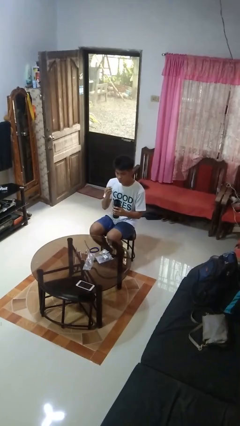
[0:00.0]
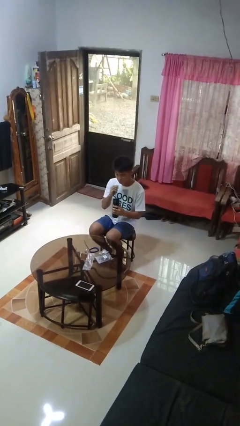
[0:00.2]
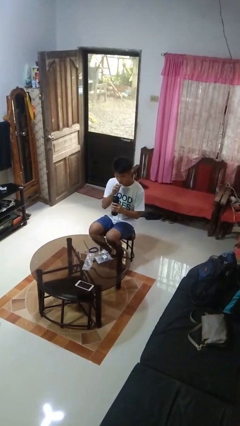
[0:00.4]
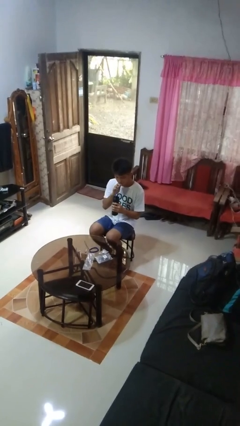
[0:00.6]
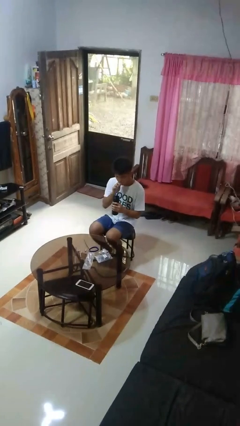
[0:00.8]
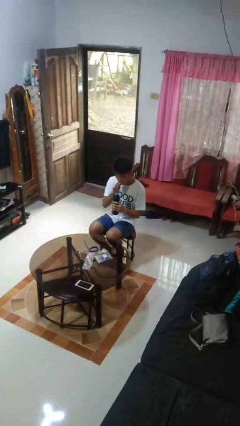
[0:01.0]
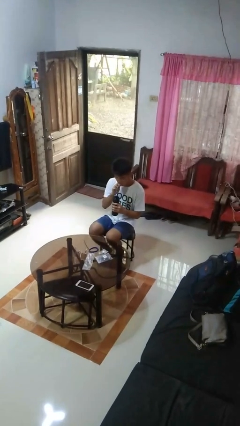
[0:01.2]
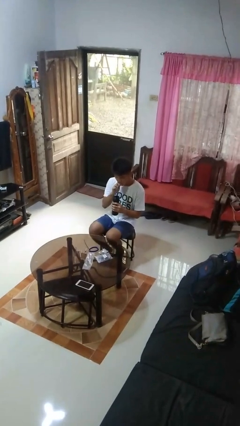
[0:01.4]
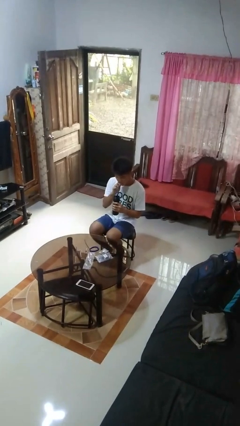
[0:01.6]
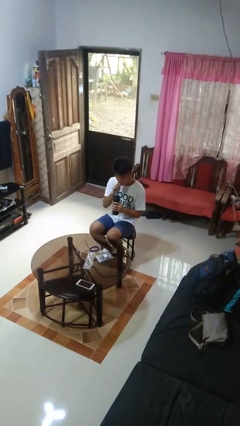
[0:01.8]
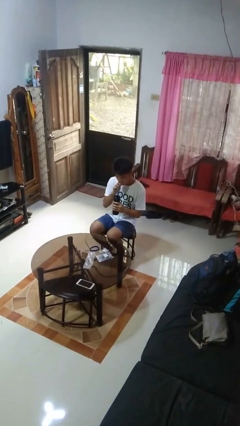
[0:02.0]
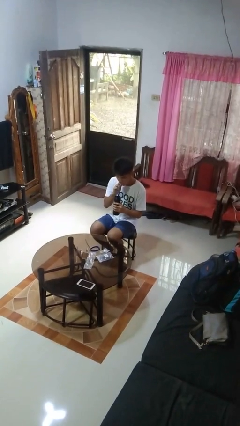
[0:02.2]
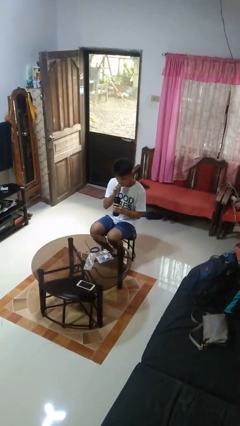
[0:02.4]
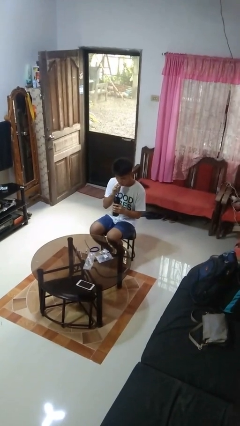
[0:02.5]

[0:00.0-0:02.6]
person drinks from straw

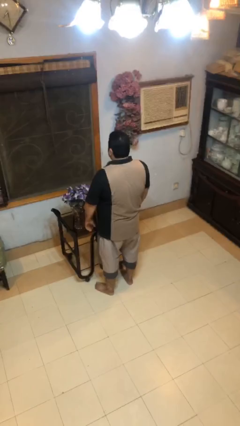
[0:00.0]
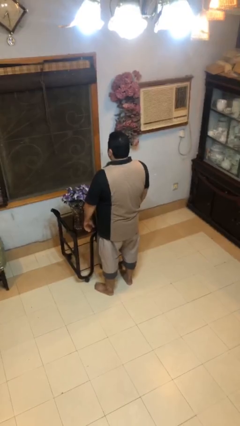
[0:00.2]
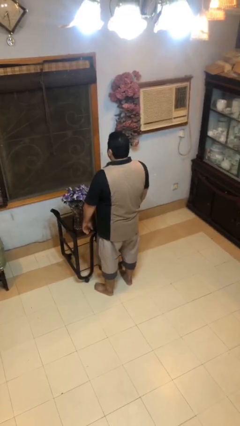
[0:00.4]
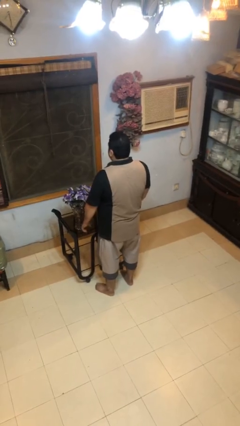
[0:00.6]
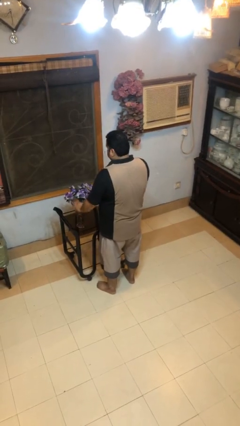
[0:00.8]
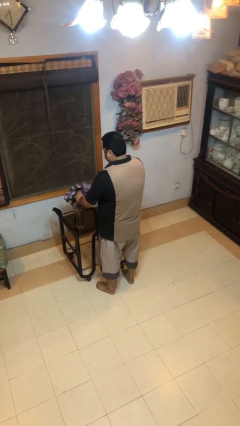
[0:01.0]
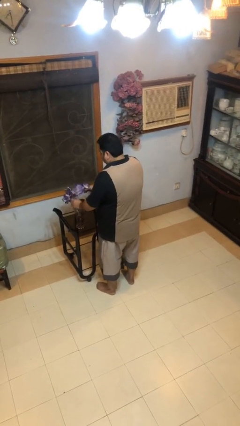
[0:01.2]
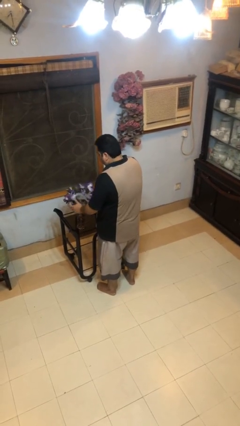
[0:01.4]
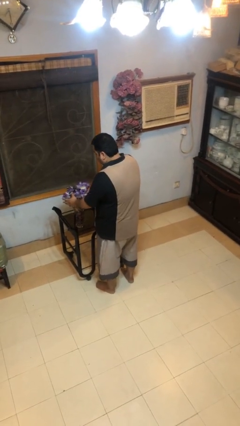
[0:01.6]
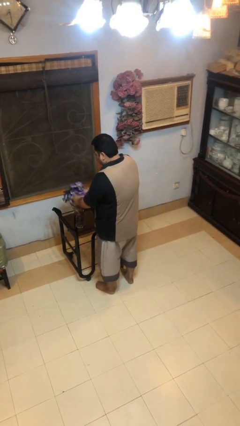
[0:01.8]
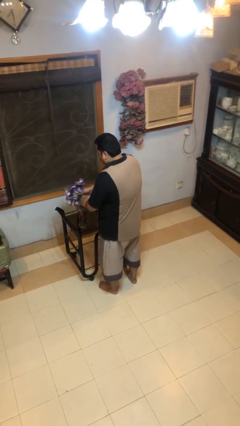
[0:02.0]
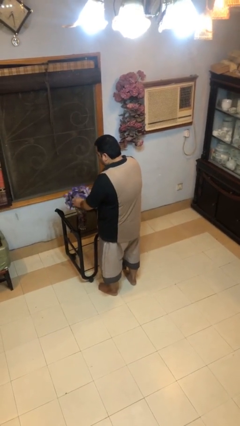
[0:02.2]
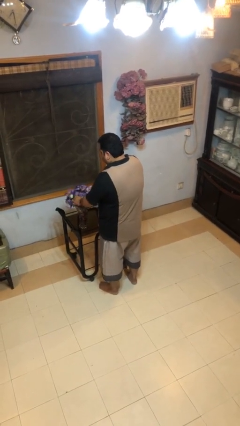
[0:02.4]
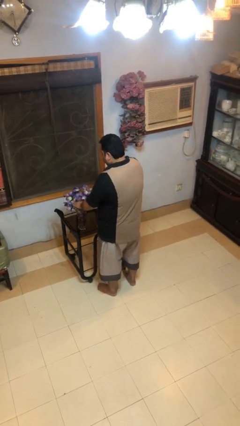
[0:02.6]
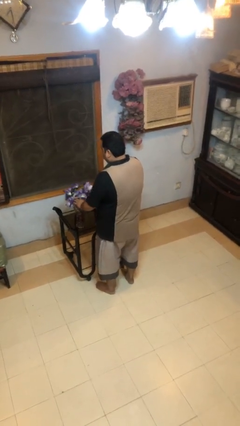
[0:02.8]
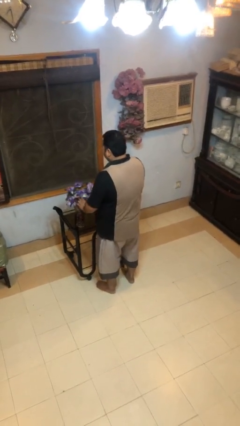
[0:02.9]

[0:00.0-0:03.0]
person arranges flowers in vase

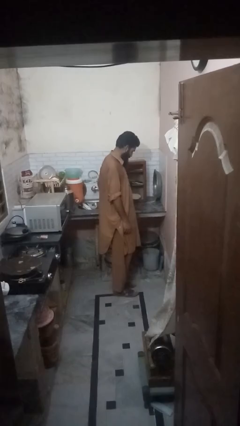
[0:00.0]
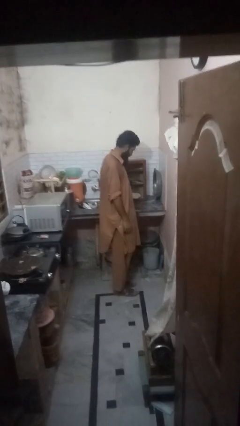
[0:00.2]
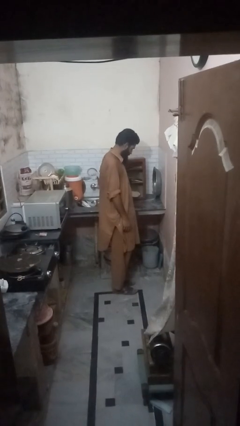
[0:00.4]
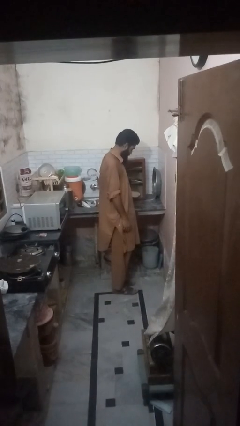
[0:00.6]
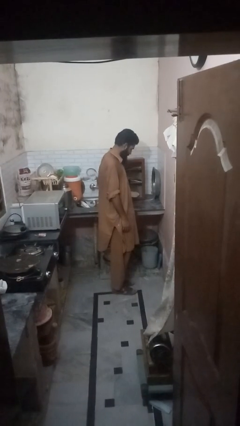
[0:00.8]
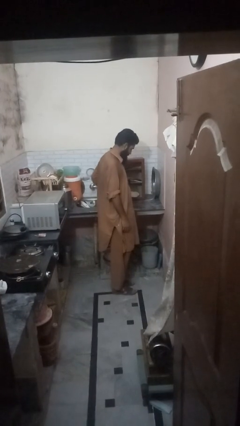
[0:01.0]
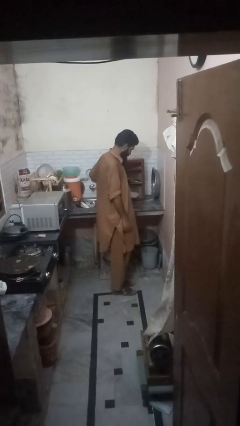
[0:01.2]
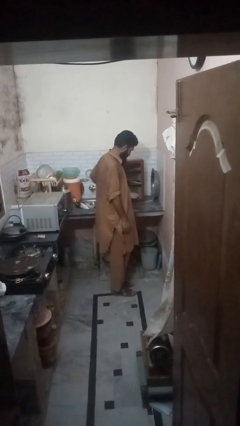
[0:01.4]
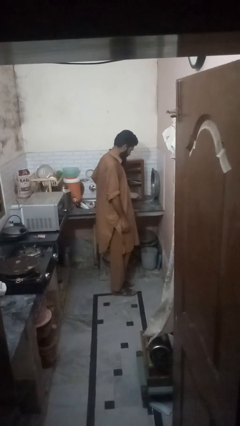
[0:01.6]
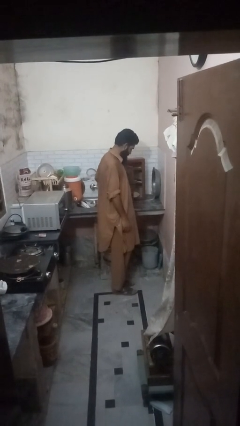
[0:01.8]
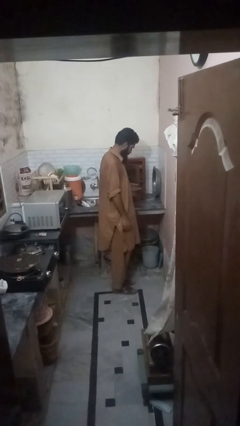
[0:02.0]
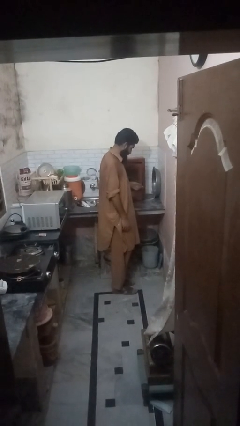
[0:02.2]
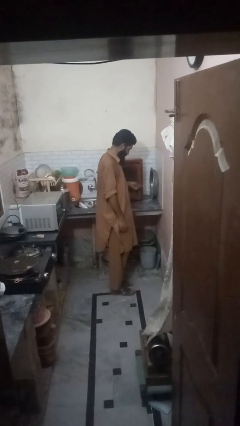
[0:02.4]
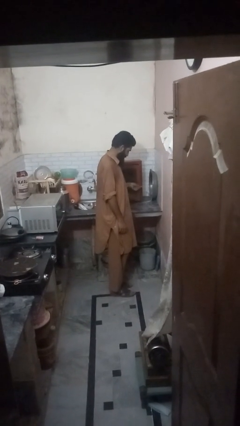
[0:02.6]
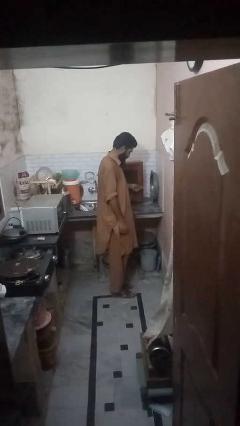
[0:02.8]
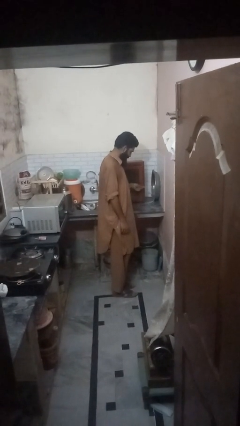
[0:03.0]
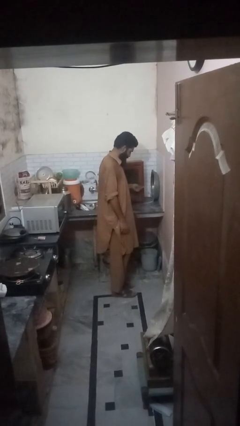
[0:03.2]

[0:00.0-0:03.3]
person closes cabinet

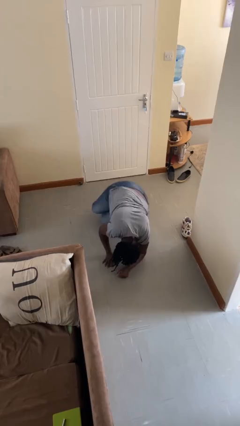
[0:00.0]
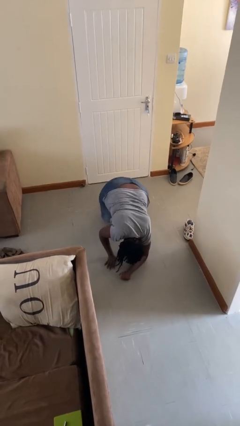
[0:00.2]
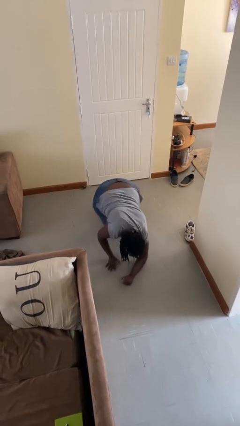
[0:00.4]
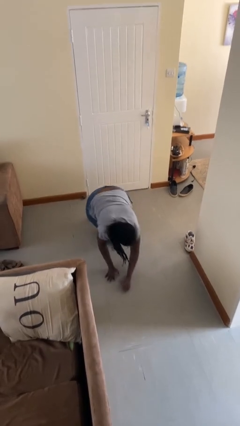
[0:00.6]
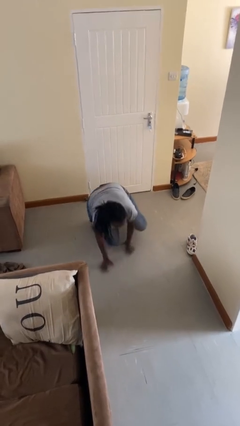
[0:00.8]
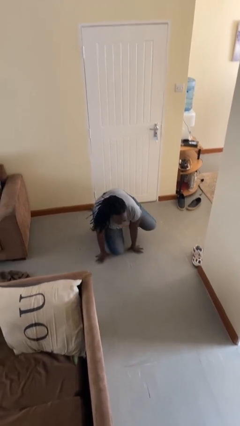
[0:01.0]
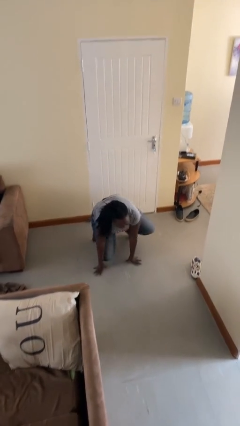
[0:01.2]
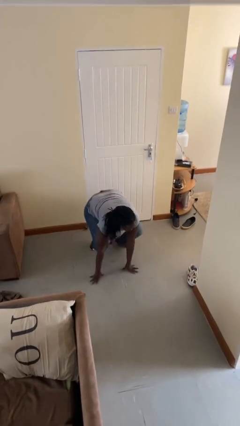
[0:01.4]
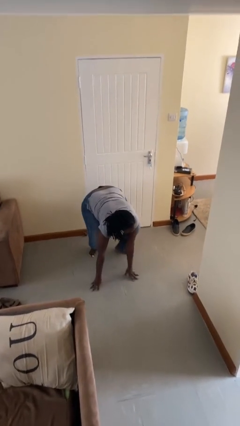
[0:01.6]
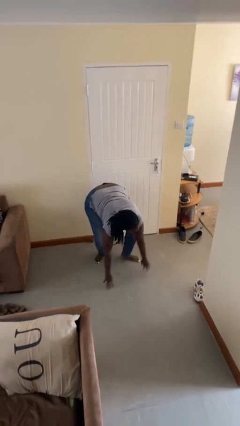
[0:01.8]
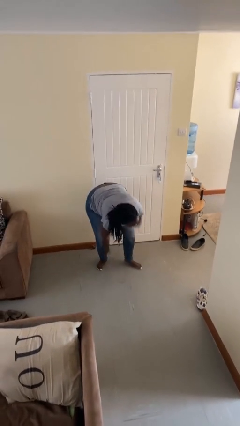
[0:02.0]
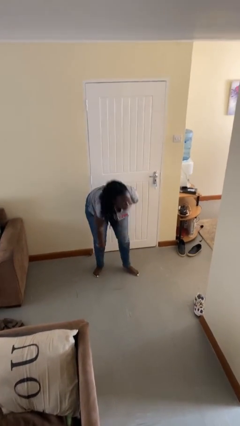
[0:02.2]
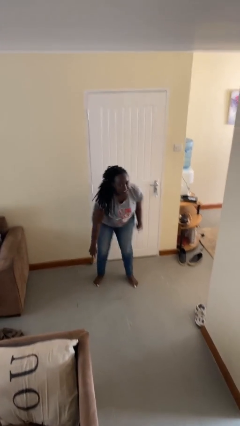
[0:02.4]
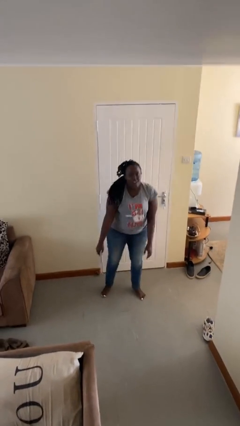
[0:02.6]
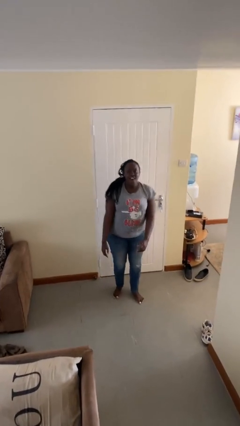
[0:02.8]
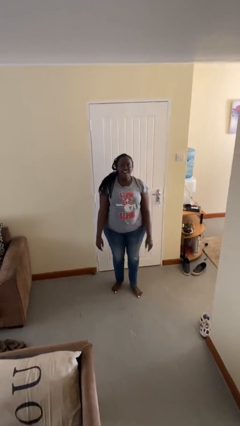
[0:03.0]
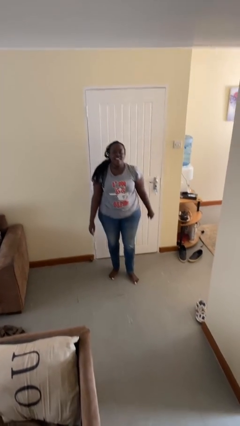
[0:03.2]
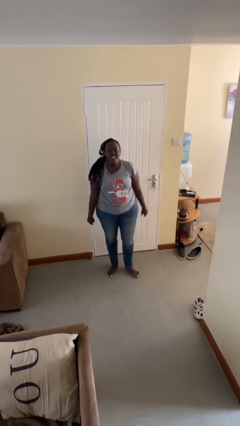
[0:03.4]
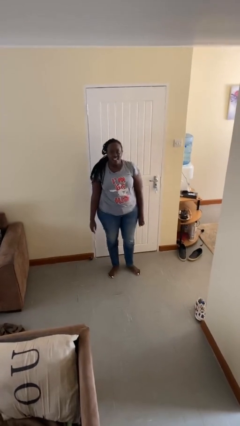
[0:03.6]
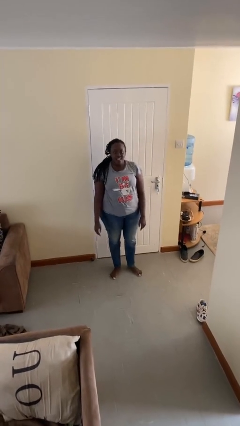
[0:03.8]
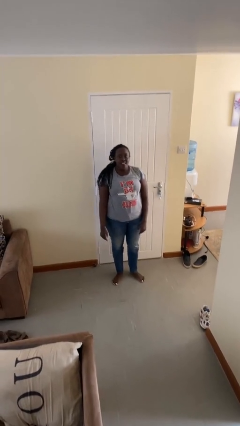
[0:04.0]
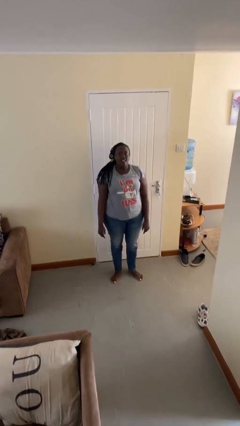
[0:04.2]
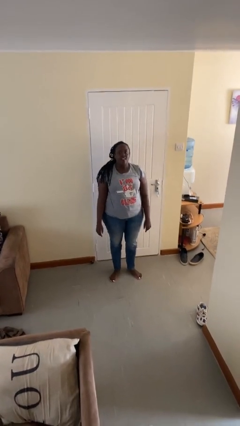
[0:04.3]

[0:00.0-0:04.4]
person stands up from floor

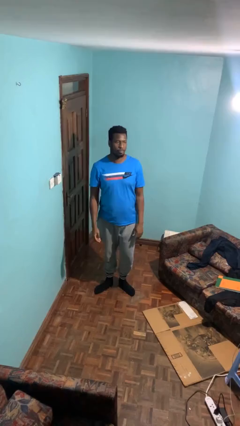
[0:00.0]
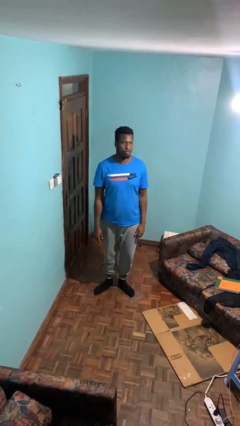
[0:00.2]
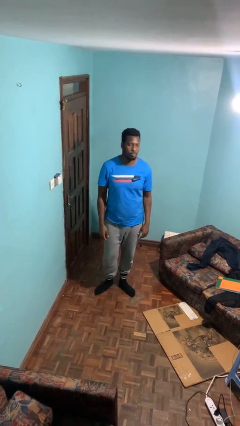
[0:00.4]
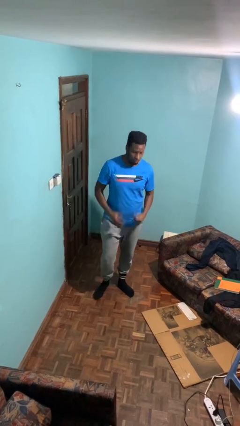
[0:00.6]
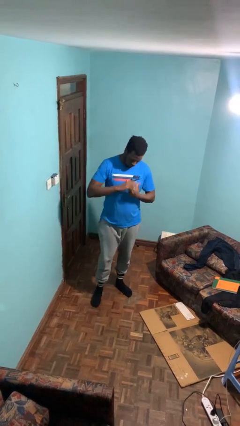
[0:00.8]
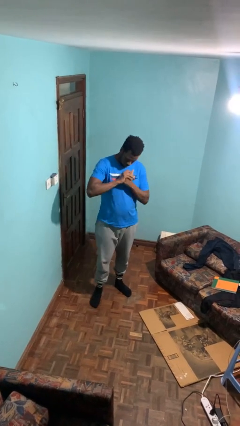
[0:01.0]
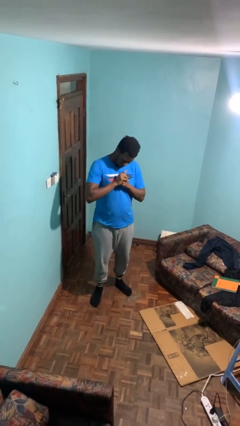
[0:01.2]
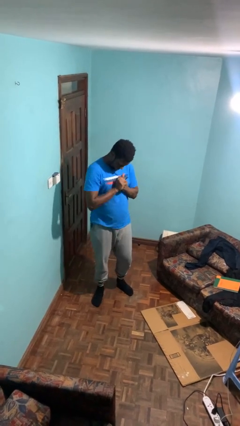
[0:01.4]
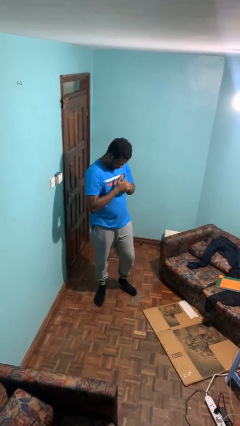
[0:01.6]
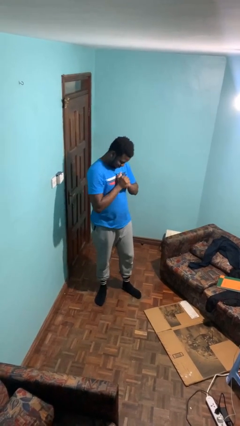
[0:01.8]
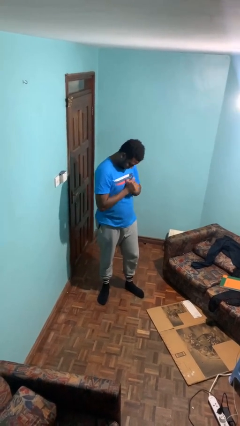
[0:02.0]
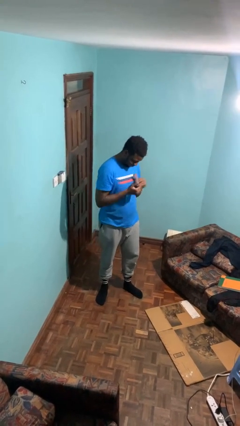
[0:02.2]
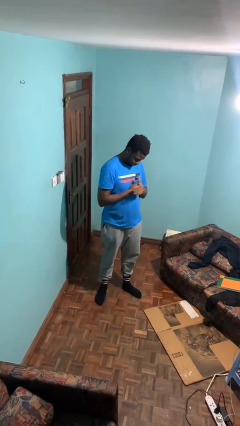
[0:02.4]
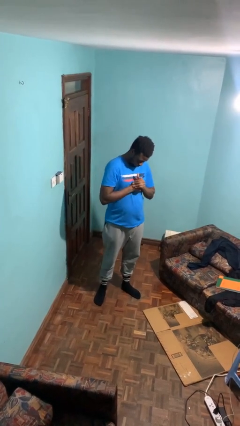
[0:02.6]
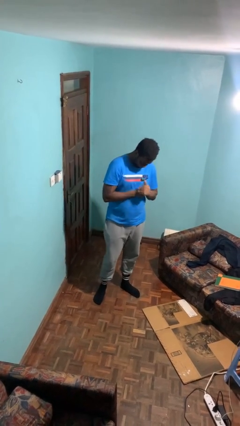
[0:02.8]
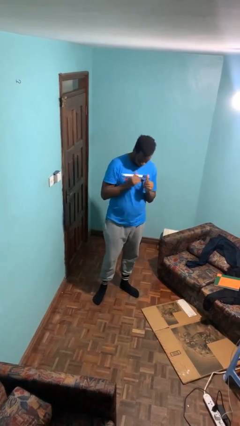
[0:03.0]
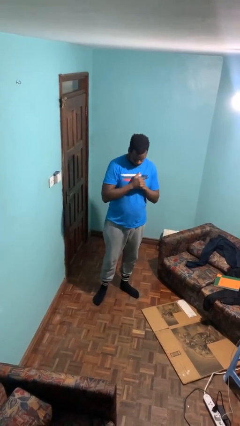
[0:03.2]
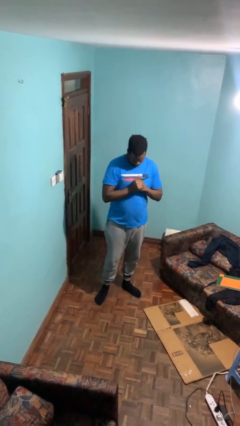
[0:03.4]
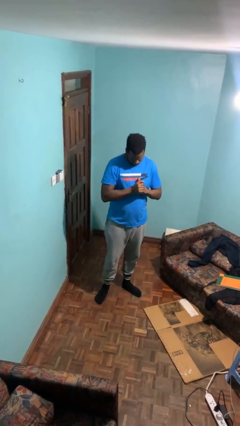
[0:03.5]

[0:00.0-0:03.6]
person cracks knuckles

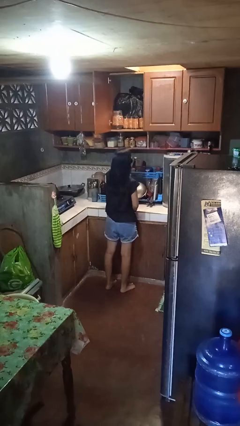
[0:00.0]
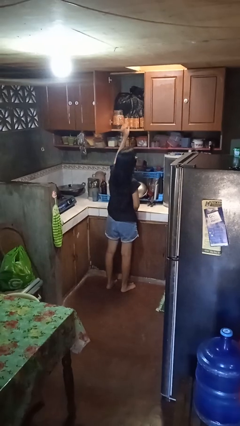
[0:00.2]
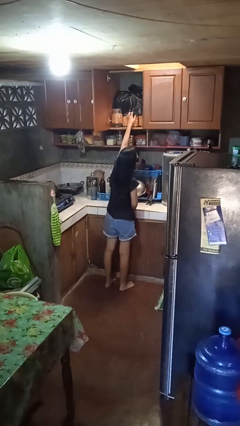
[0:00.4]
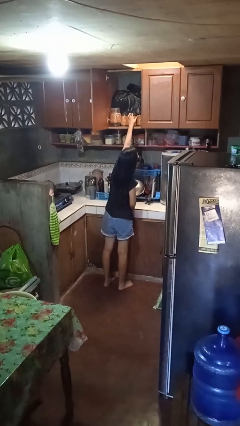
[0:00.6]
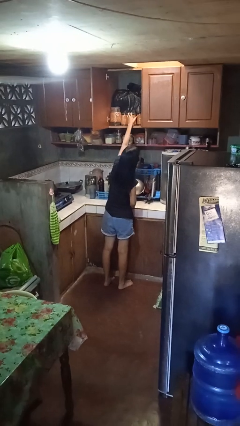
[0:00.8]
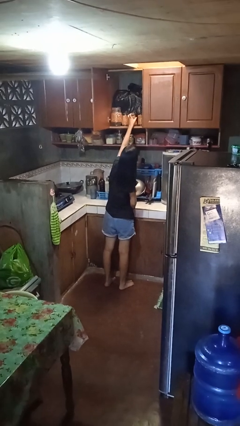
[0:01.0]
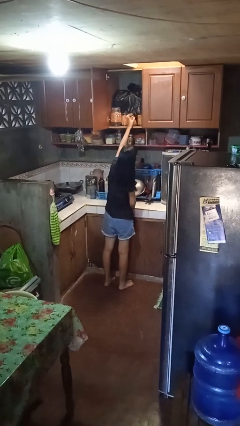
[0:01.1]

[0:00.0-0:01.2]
person picks up object from cabinet
